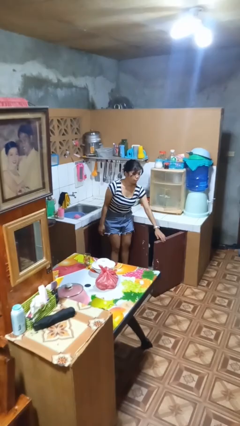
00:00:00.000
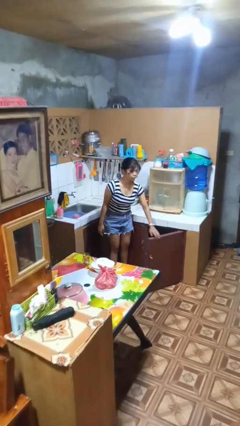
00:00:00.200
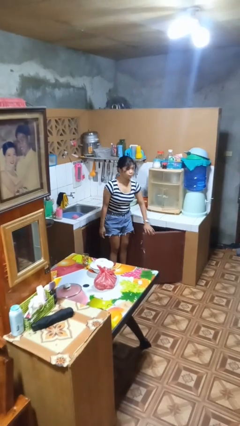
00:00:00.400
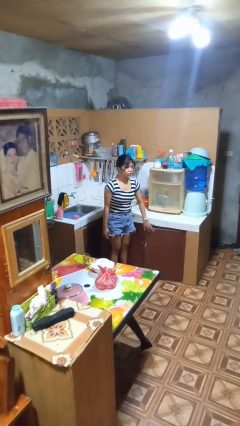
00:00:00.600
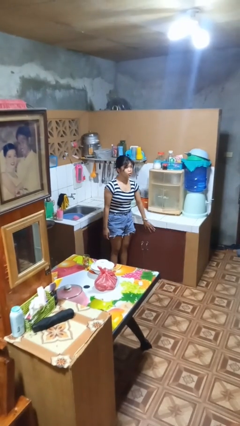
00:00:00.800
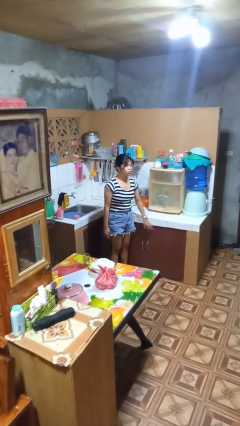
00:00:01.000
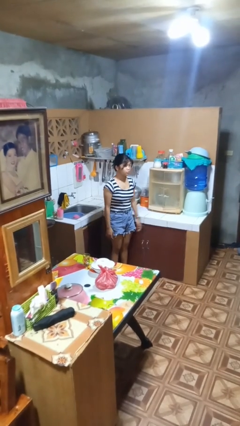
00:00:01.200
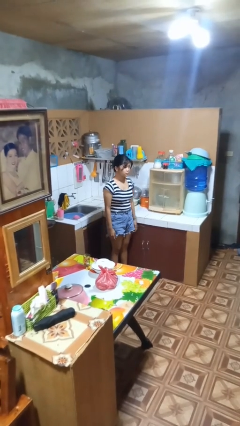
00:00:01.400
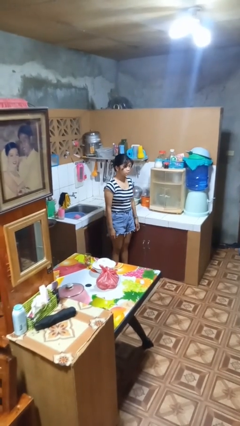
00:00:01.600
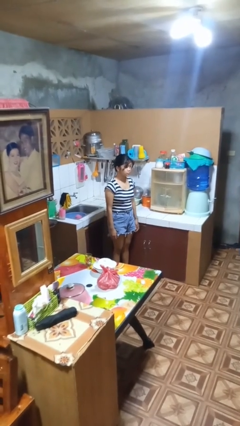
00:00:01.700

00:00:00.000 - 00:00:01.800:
person closes cabinet

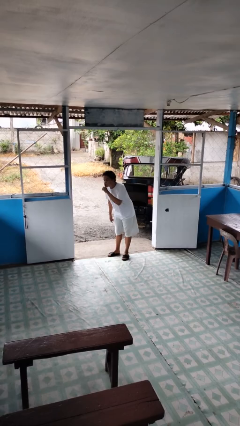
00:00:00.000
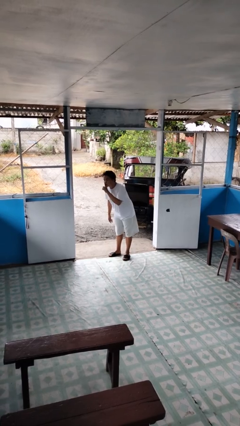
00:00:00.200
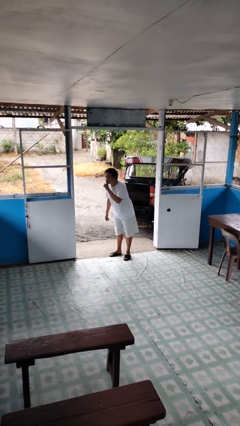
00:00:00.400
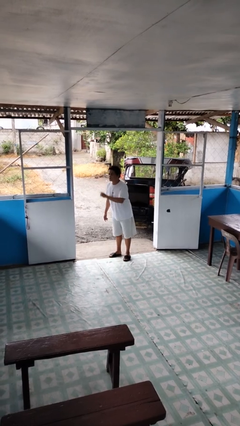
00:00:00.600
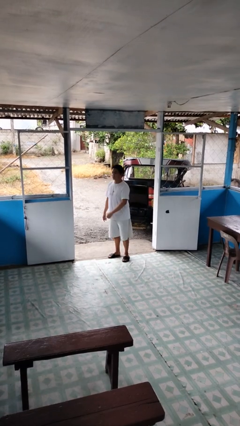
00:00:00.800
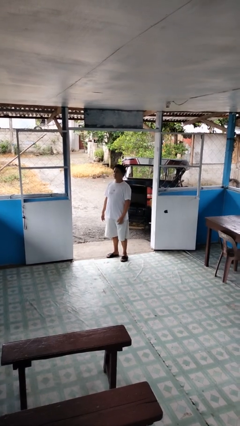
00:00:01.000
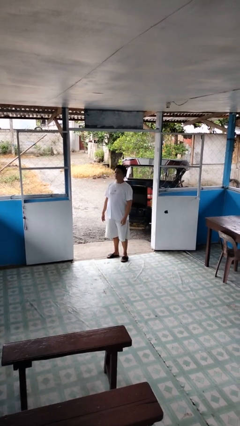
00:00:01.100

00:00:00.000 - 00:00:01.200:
person gestures be quiet

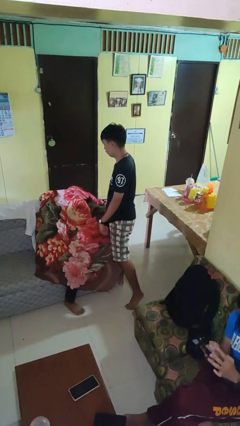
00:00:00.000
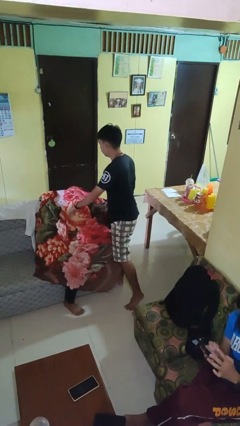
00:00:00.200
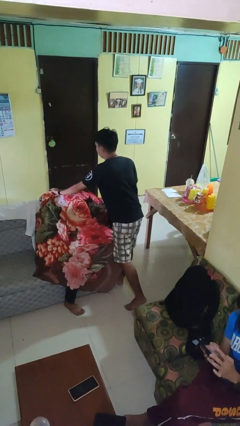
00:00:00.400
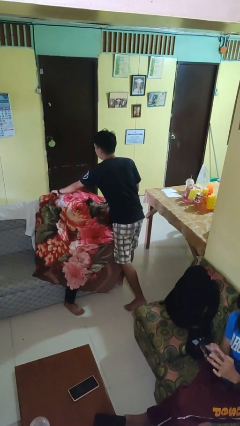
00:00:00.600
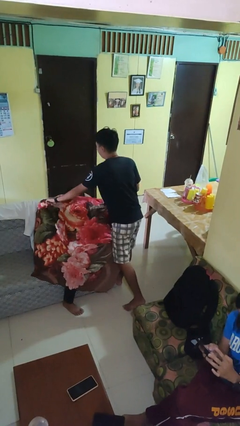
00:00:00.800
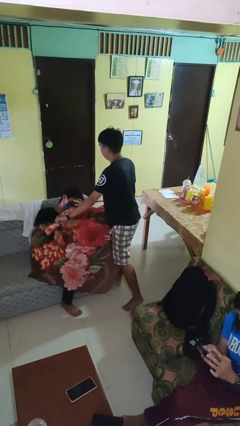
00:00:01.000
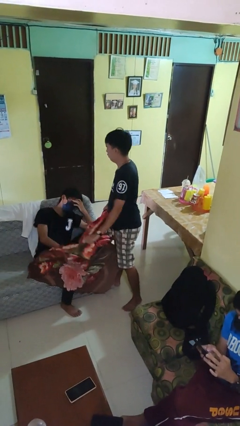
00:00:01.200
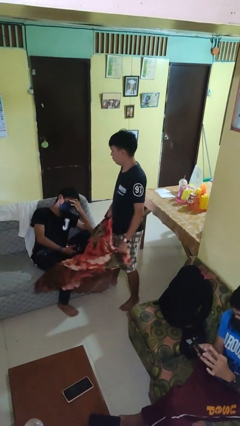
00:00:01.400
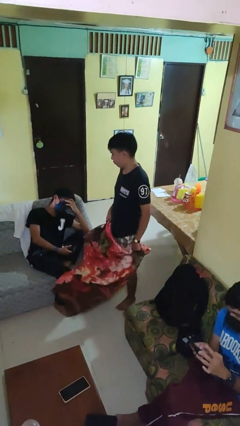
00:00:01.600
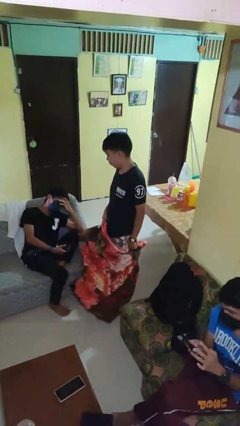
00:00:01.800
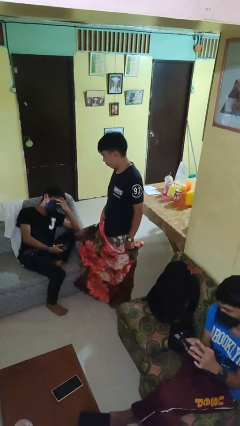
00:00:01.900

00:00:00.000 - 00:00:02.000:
person uncovers friend with blanket

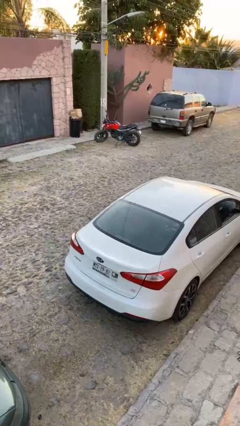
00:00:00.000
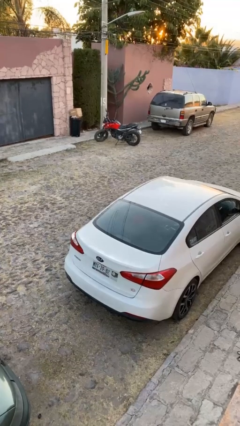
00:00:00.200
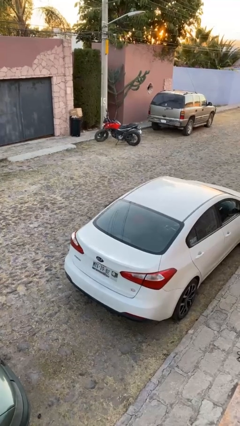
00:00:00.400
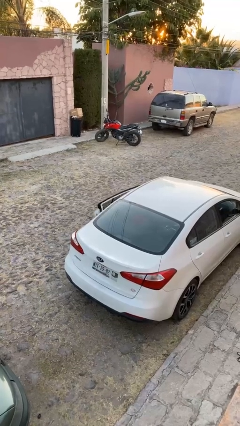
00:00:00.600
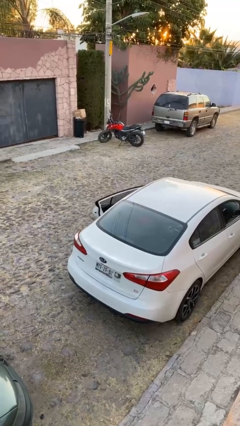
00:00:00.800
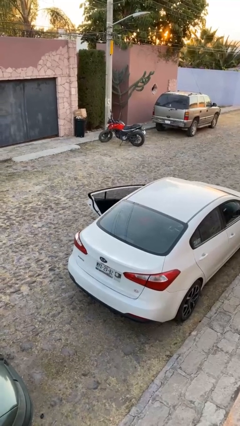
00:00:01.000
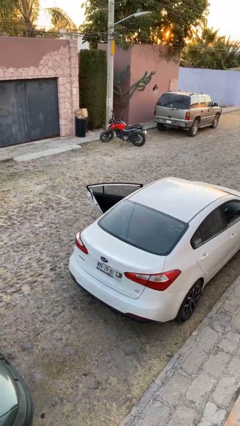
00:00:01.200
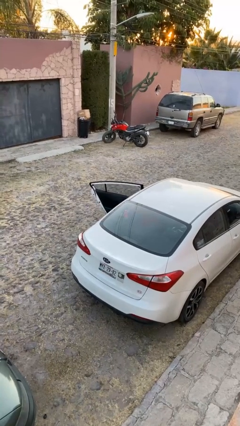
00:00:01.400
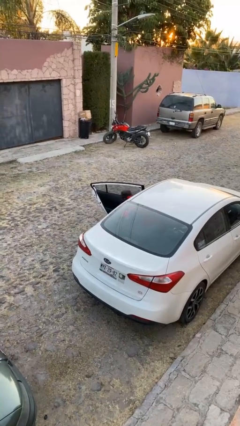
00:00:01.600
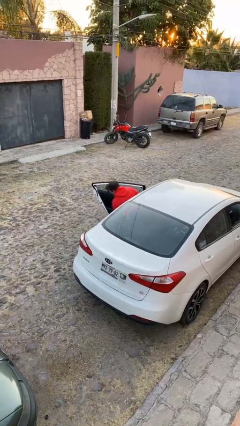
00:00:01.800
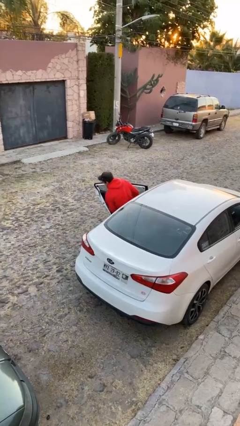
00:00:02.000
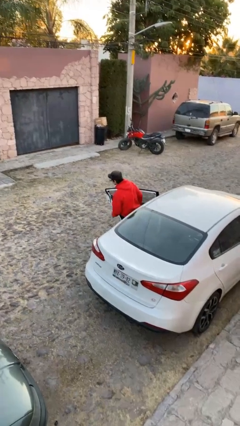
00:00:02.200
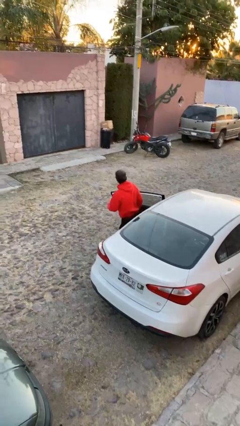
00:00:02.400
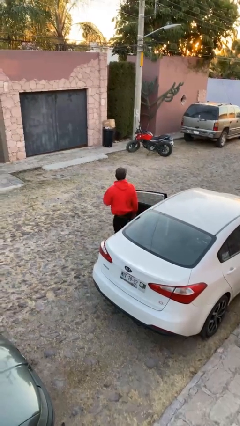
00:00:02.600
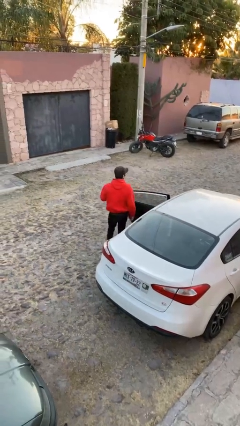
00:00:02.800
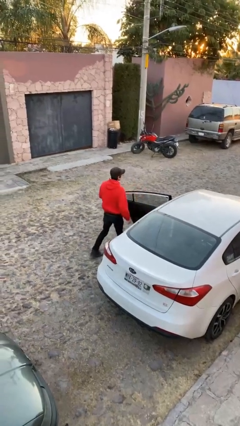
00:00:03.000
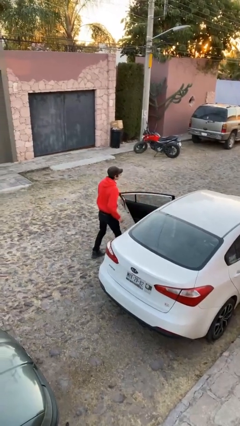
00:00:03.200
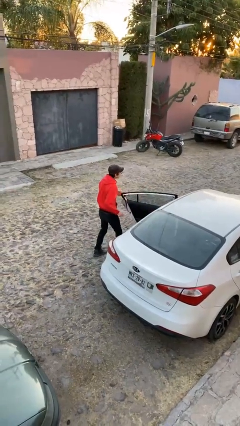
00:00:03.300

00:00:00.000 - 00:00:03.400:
car drops off person

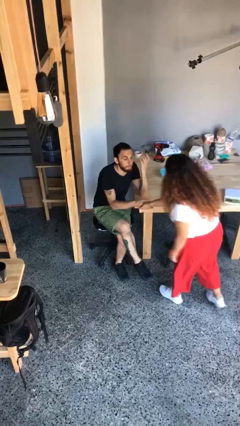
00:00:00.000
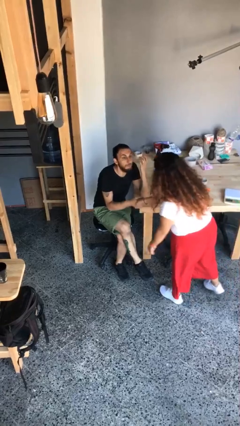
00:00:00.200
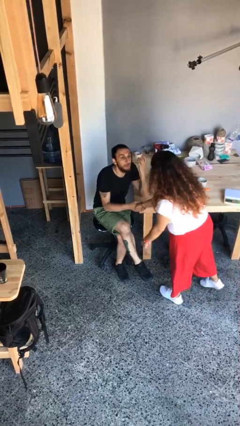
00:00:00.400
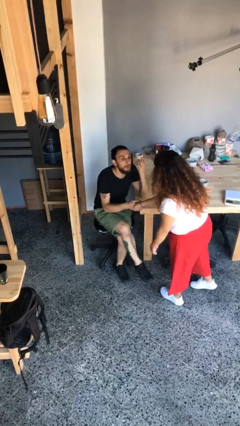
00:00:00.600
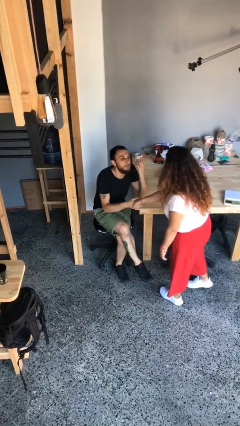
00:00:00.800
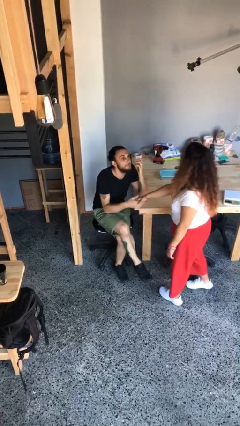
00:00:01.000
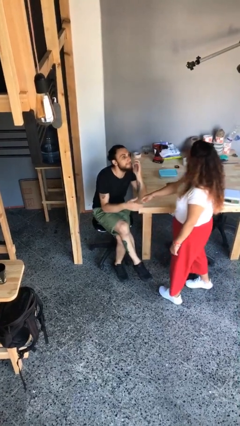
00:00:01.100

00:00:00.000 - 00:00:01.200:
person shakes hand

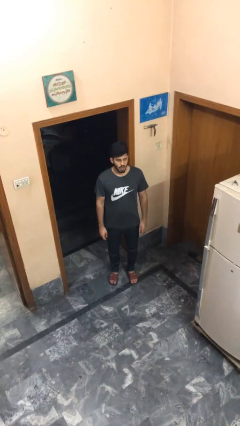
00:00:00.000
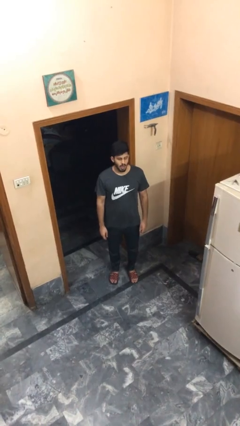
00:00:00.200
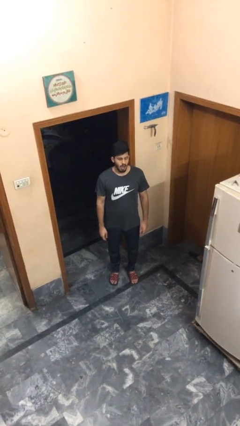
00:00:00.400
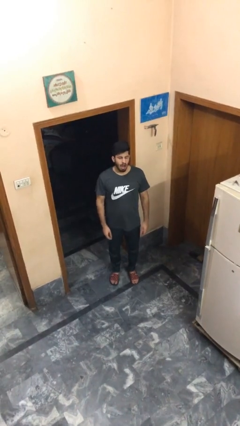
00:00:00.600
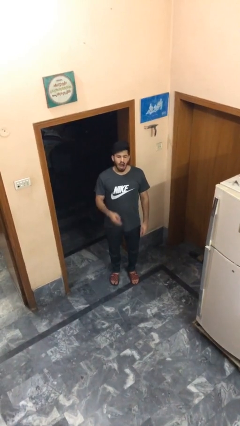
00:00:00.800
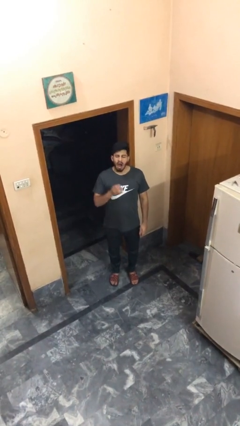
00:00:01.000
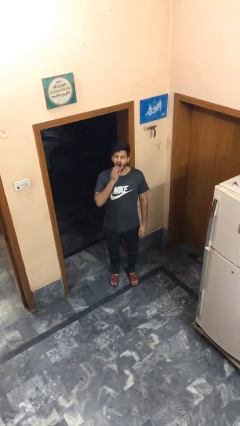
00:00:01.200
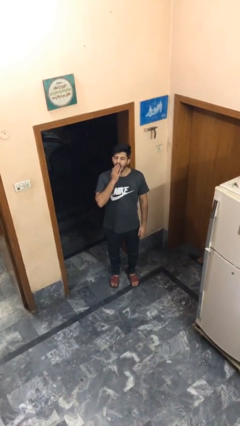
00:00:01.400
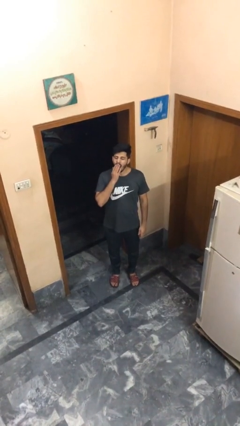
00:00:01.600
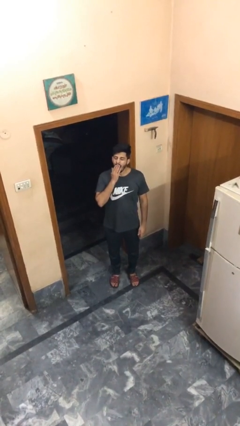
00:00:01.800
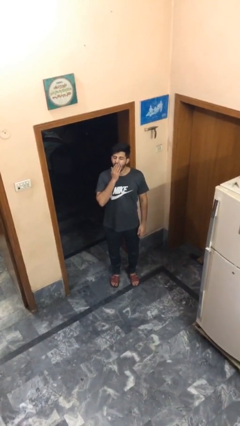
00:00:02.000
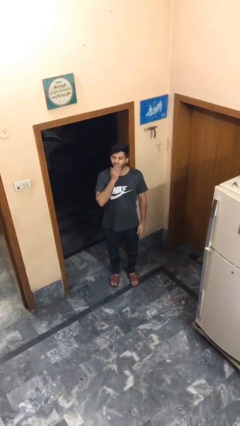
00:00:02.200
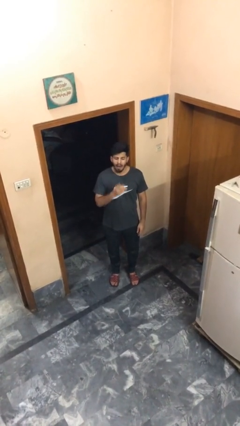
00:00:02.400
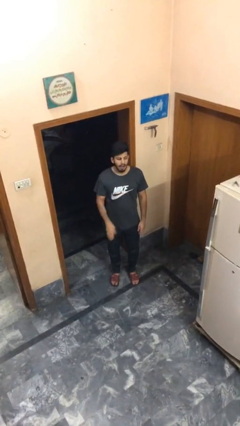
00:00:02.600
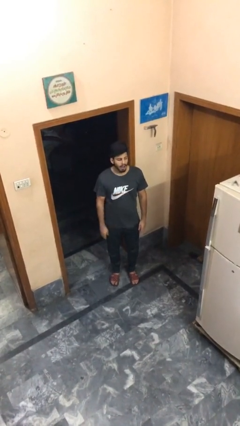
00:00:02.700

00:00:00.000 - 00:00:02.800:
person yawns

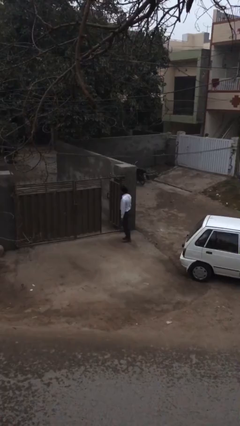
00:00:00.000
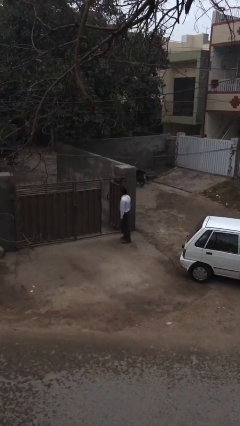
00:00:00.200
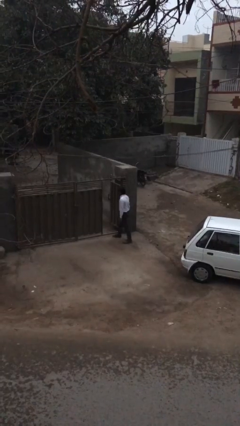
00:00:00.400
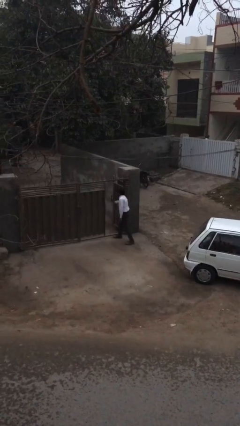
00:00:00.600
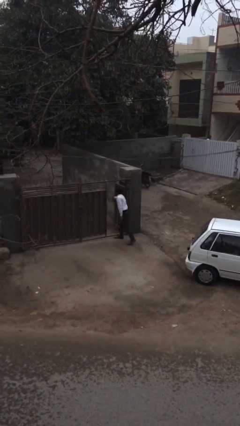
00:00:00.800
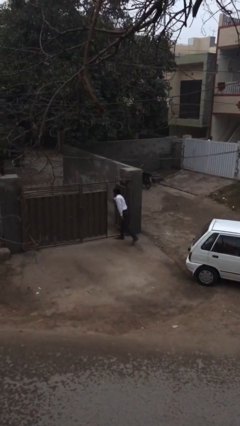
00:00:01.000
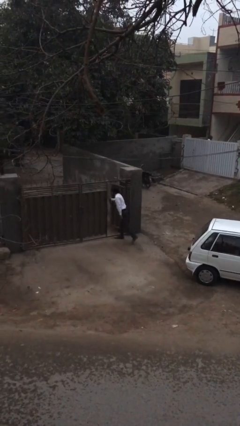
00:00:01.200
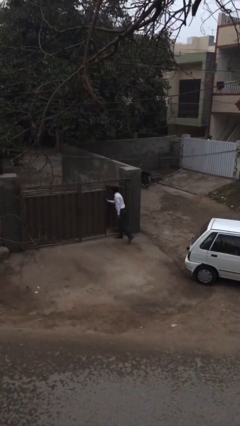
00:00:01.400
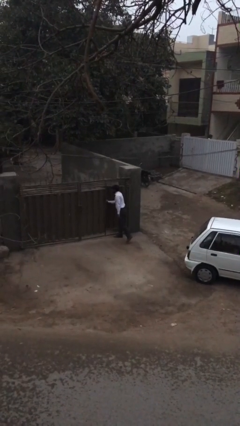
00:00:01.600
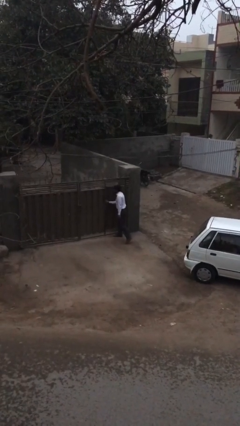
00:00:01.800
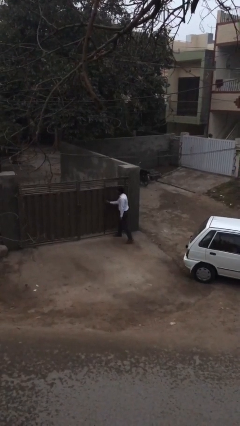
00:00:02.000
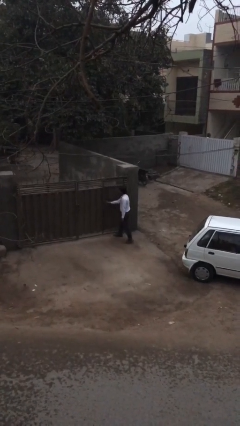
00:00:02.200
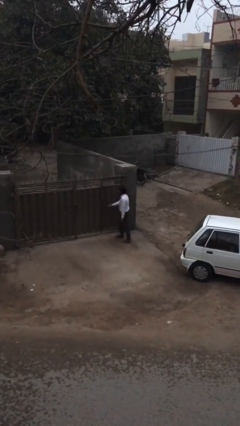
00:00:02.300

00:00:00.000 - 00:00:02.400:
person closes facility door

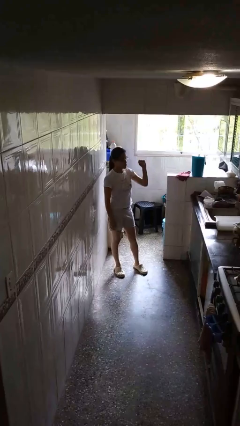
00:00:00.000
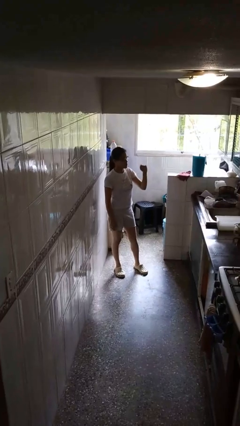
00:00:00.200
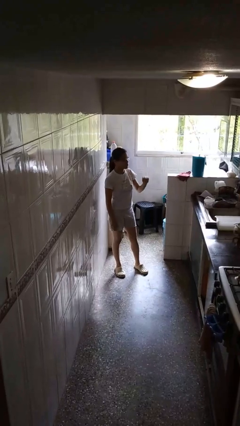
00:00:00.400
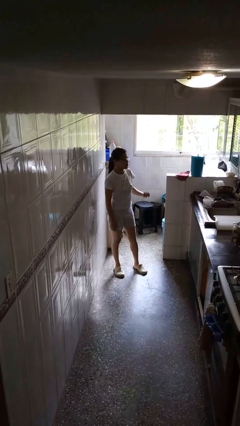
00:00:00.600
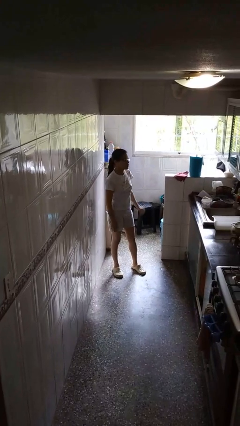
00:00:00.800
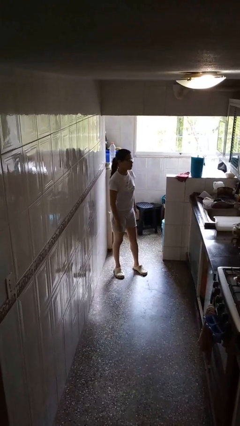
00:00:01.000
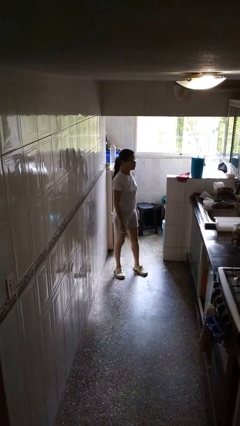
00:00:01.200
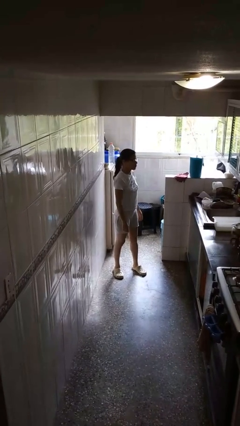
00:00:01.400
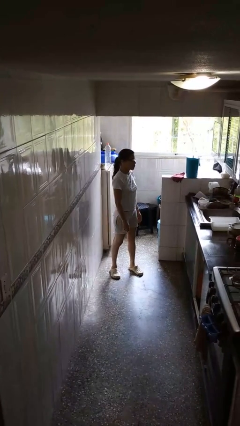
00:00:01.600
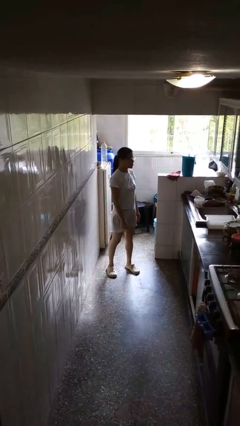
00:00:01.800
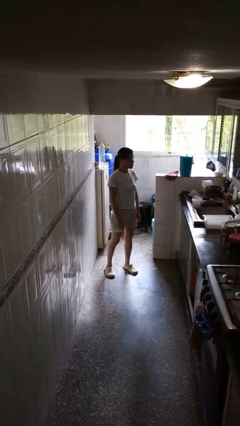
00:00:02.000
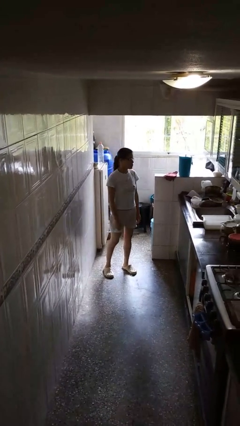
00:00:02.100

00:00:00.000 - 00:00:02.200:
person gestures lower hand
